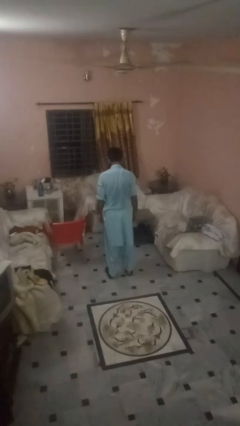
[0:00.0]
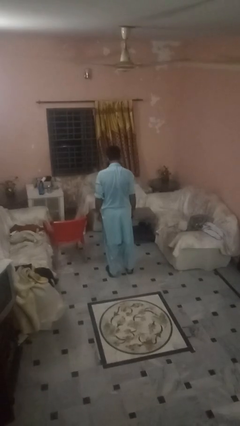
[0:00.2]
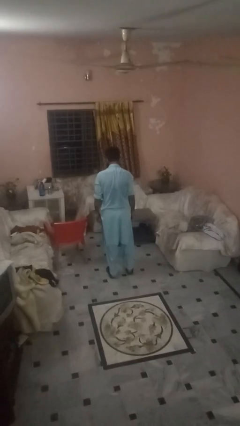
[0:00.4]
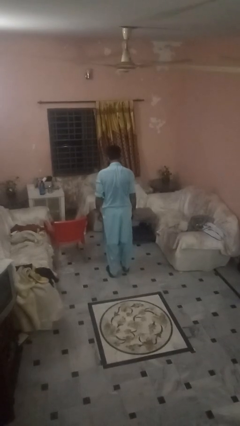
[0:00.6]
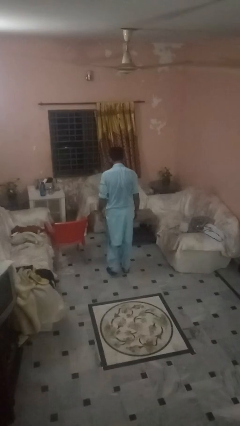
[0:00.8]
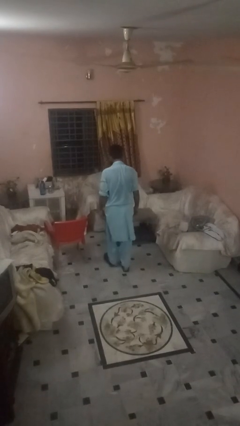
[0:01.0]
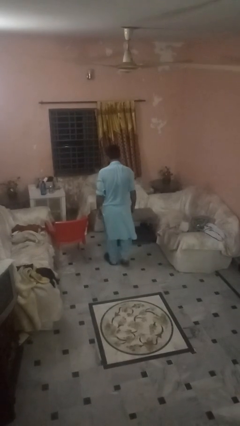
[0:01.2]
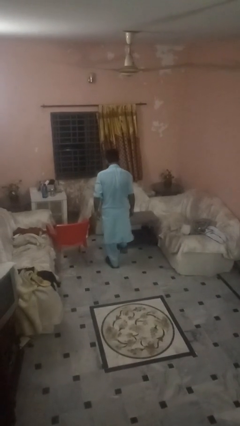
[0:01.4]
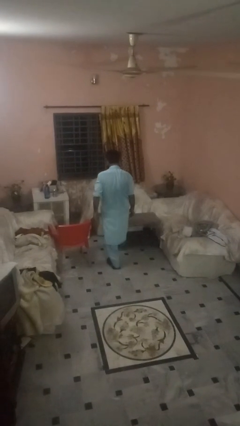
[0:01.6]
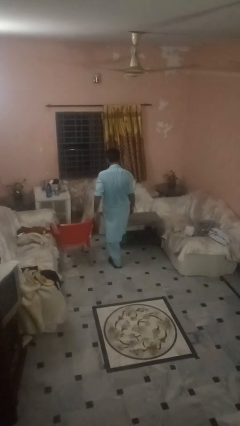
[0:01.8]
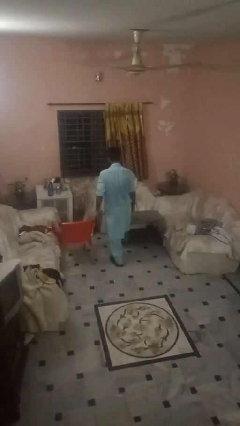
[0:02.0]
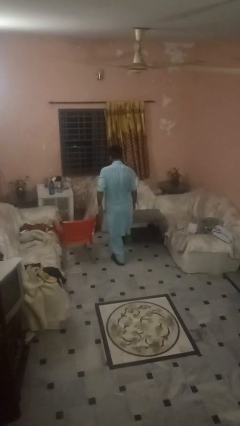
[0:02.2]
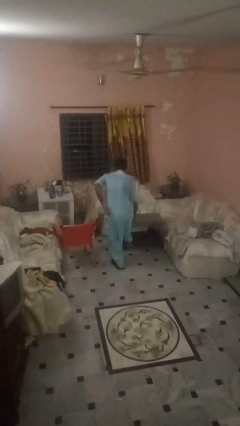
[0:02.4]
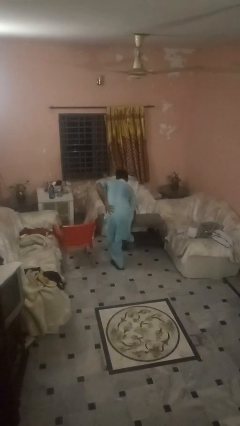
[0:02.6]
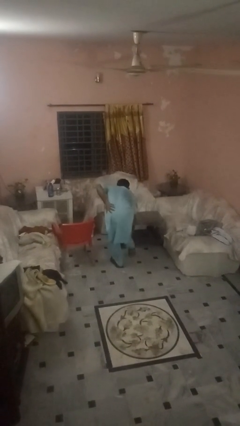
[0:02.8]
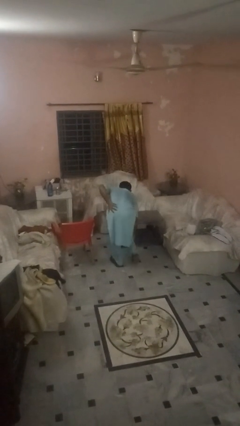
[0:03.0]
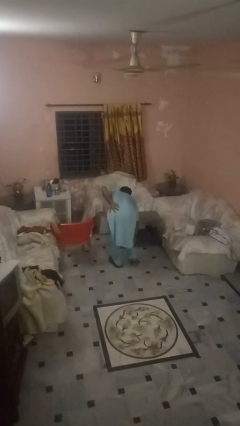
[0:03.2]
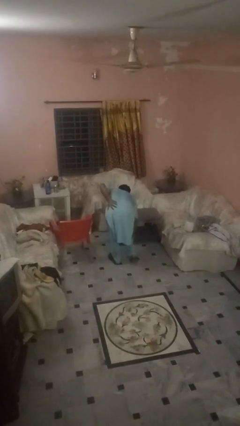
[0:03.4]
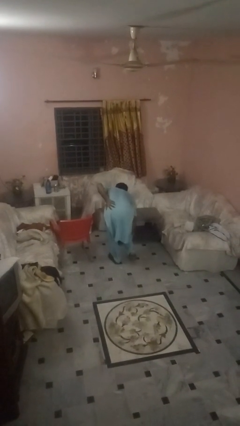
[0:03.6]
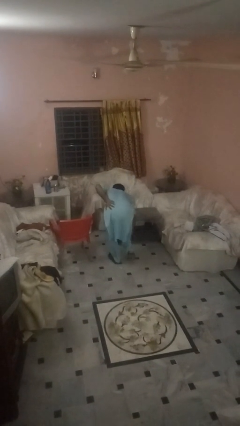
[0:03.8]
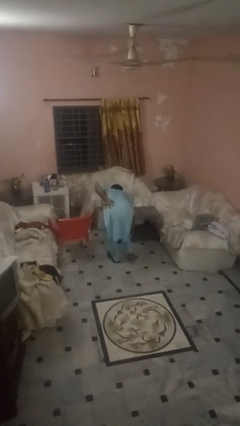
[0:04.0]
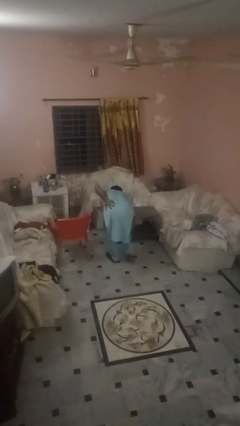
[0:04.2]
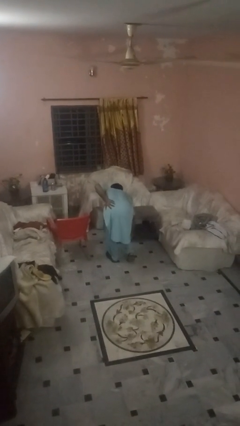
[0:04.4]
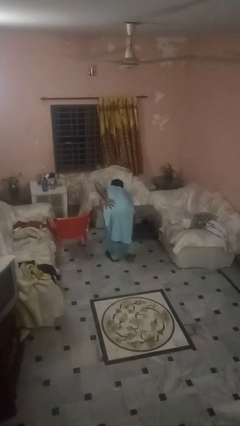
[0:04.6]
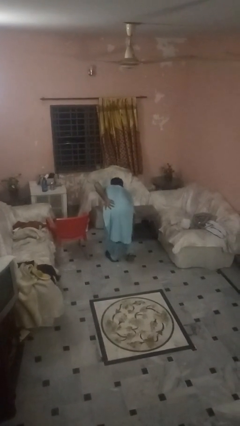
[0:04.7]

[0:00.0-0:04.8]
person bumps into table

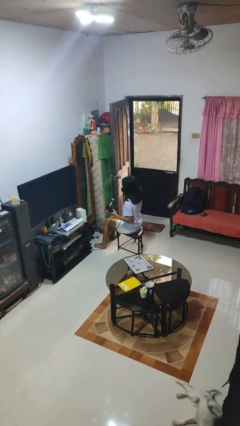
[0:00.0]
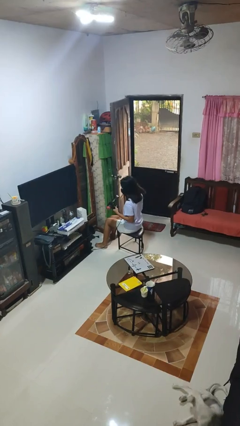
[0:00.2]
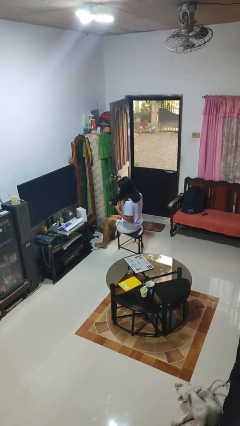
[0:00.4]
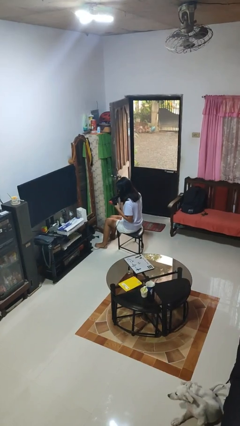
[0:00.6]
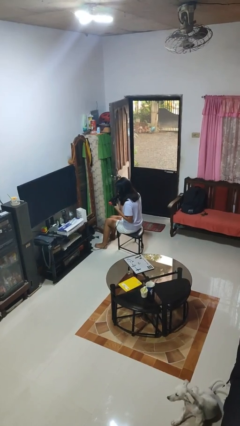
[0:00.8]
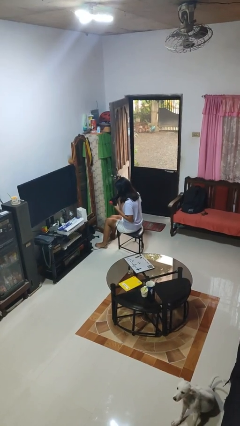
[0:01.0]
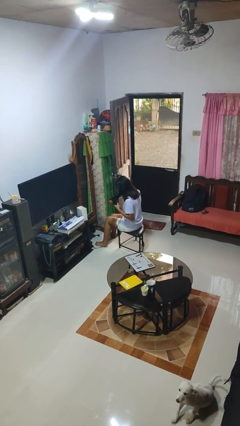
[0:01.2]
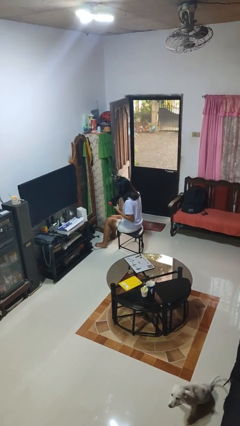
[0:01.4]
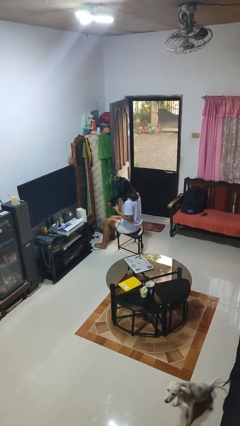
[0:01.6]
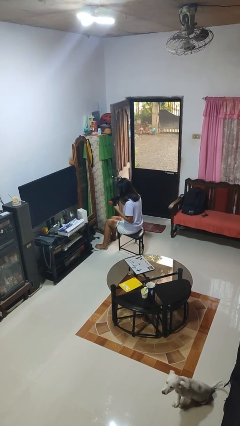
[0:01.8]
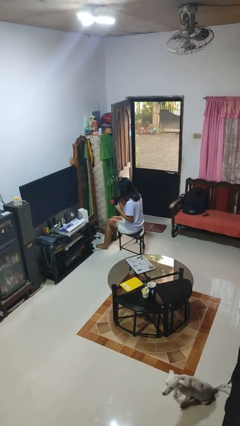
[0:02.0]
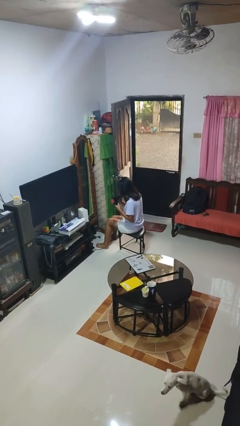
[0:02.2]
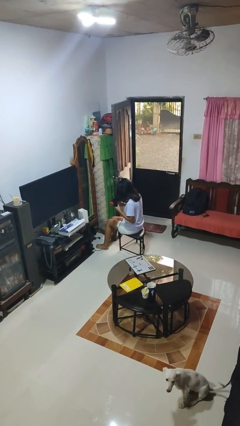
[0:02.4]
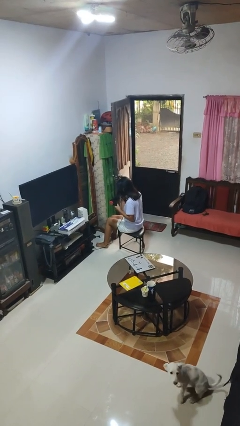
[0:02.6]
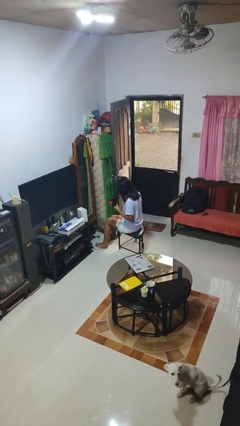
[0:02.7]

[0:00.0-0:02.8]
person dries hair with hairdryer

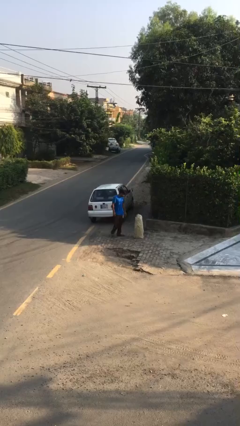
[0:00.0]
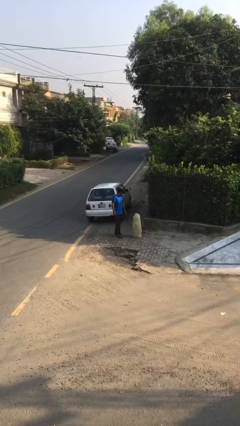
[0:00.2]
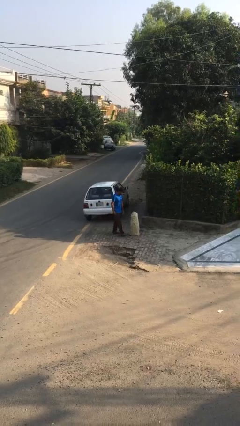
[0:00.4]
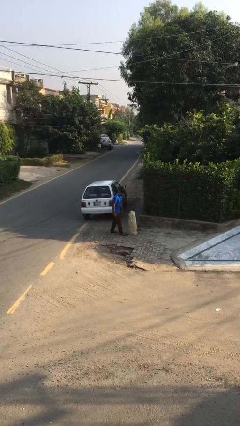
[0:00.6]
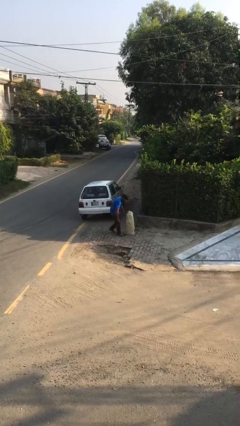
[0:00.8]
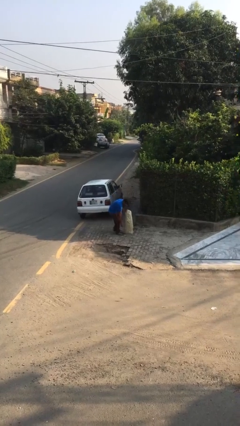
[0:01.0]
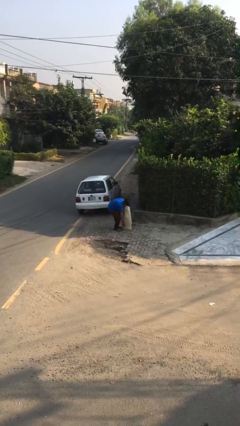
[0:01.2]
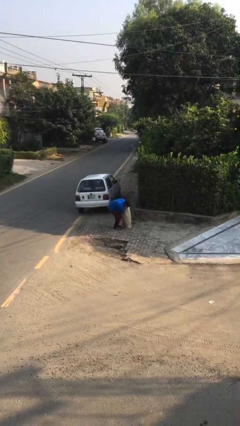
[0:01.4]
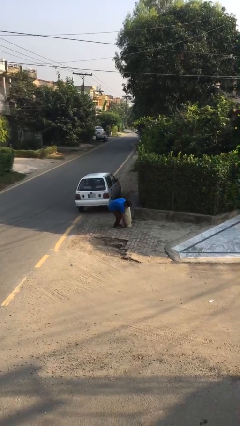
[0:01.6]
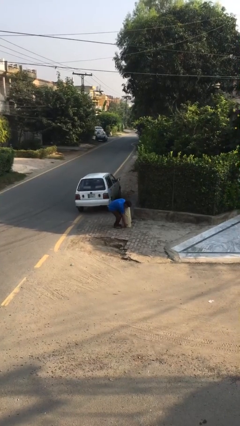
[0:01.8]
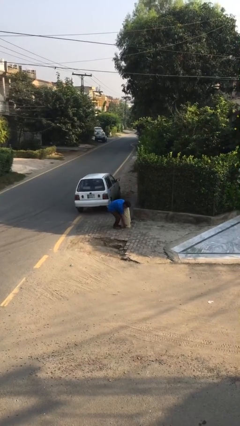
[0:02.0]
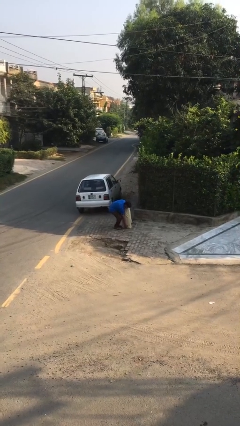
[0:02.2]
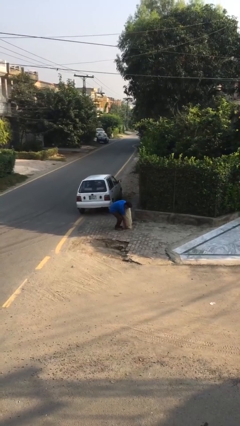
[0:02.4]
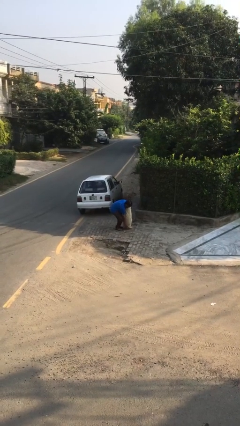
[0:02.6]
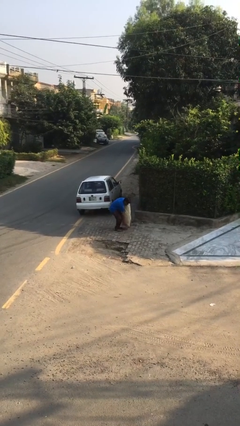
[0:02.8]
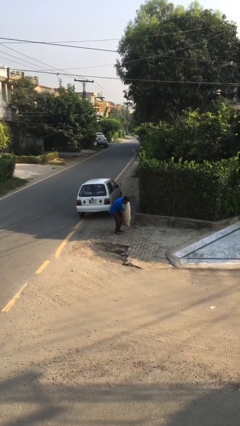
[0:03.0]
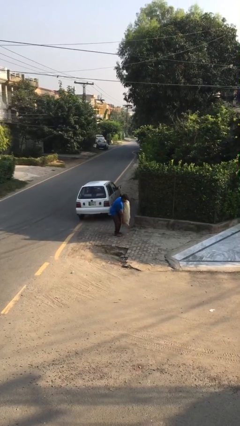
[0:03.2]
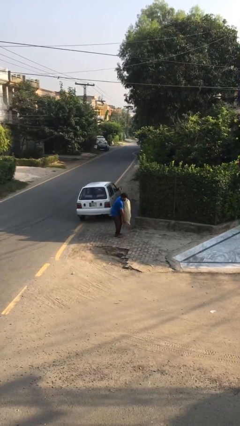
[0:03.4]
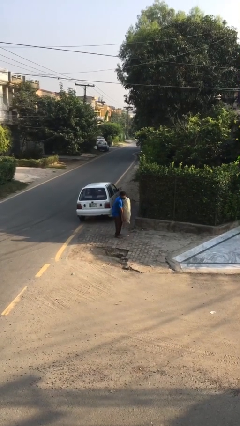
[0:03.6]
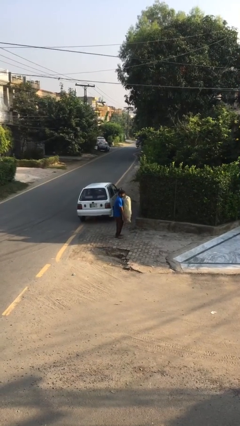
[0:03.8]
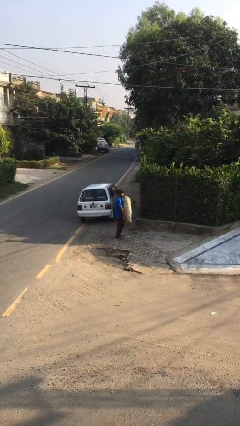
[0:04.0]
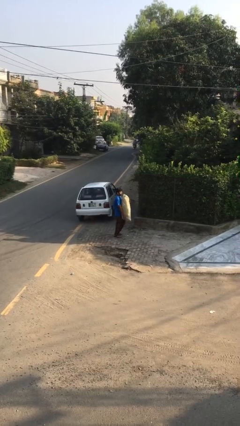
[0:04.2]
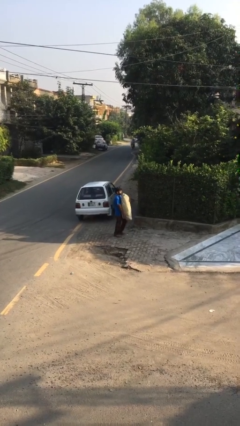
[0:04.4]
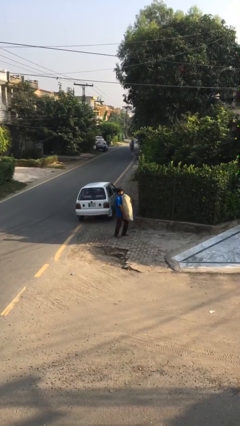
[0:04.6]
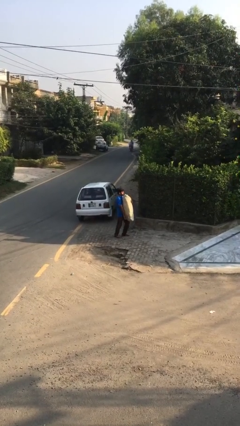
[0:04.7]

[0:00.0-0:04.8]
person picks up object from floor

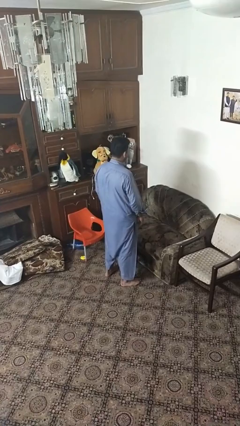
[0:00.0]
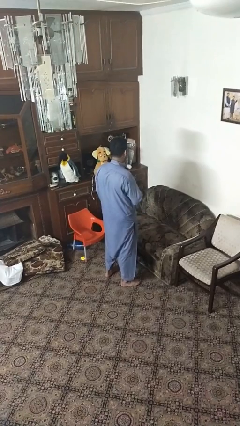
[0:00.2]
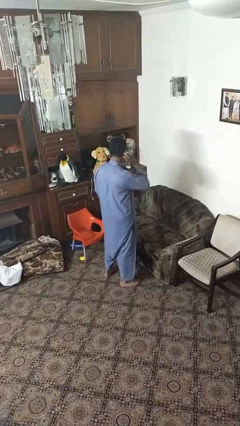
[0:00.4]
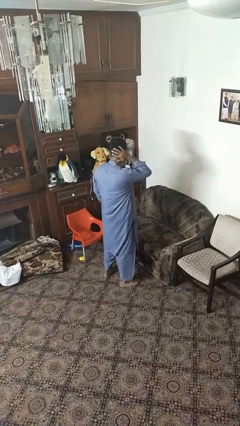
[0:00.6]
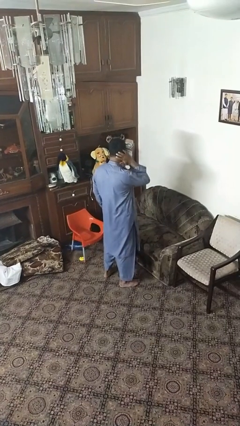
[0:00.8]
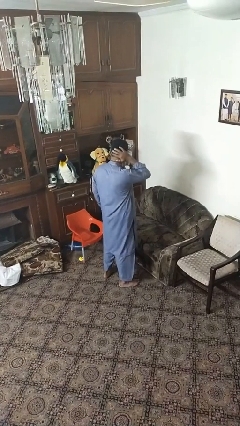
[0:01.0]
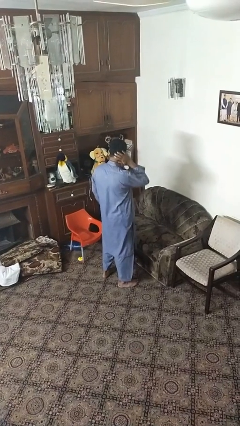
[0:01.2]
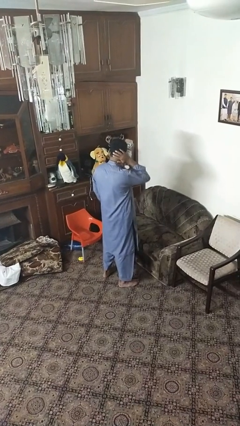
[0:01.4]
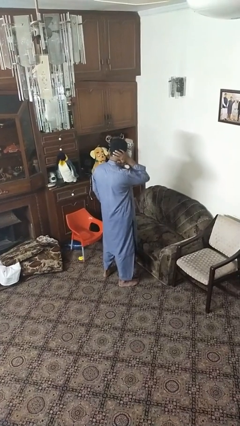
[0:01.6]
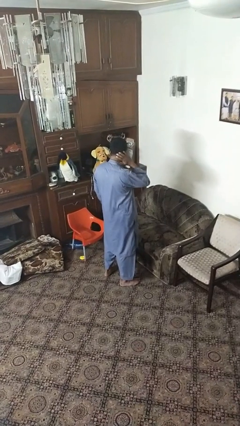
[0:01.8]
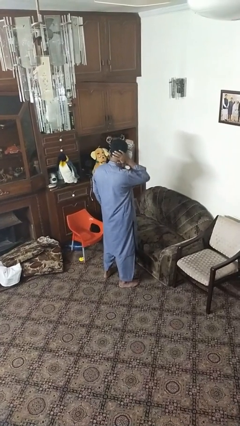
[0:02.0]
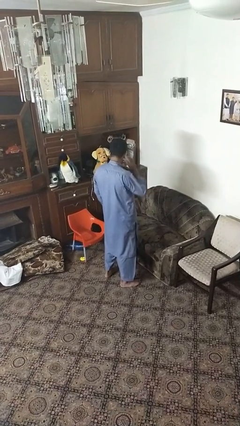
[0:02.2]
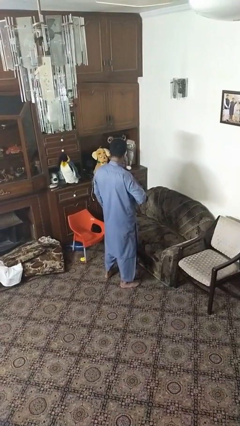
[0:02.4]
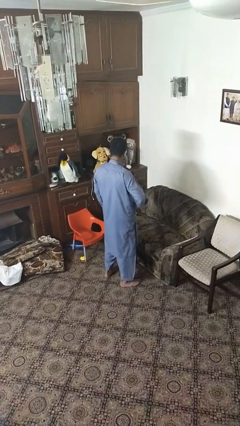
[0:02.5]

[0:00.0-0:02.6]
person strokes hair

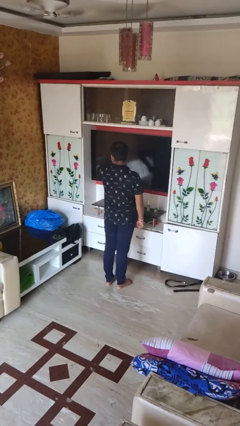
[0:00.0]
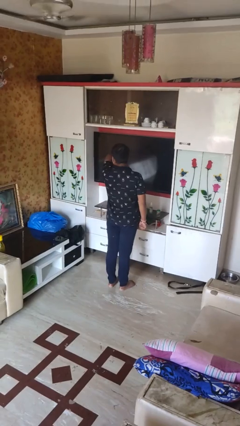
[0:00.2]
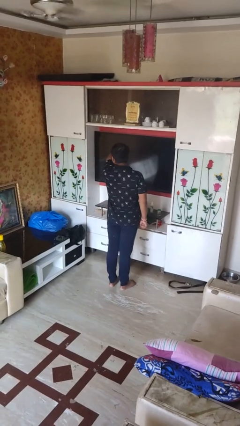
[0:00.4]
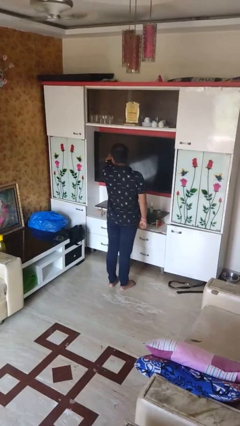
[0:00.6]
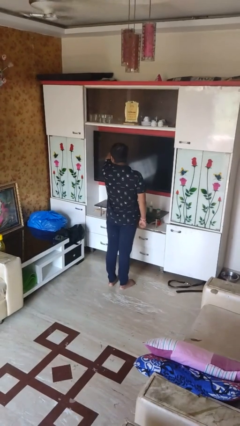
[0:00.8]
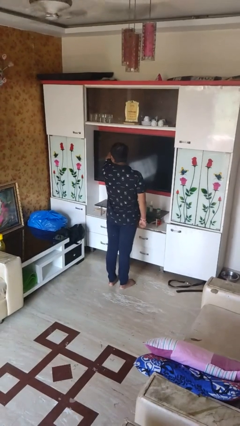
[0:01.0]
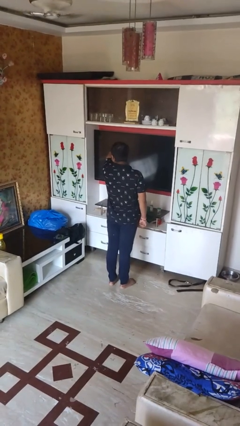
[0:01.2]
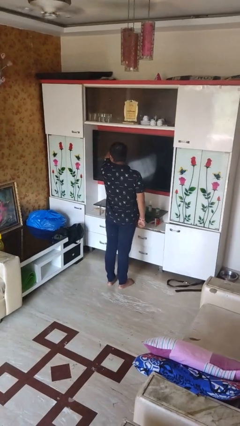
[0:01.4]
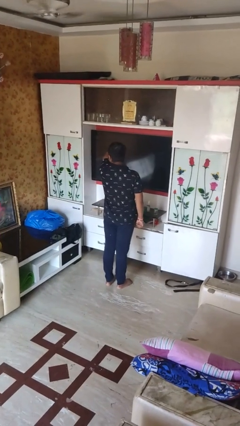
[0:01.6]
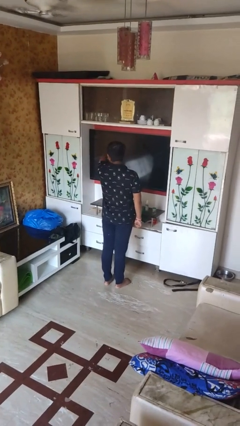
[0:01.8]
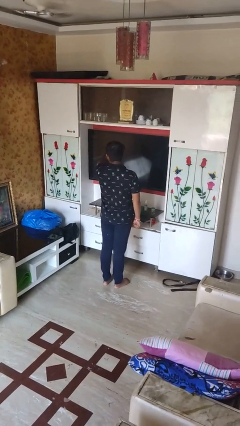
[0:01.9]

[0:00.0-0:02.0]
person sneezes into arm

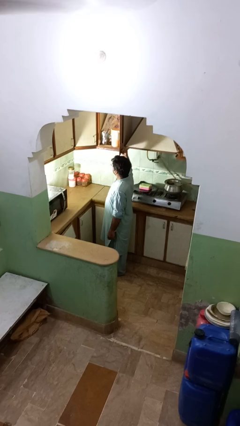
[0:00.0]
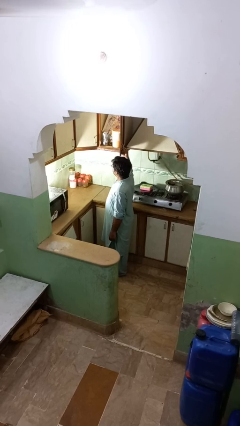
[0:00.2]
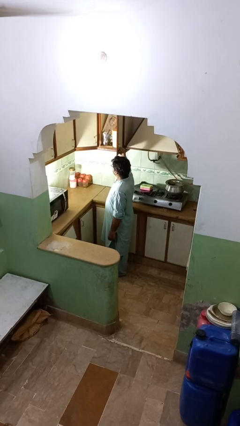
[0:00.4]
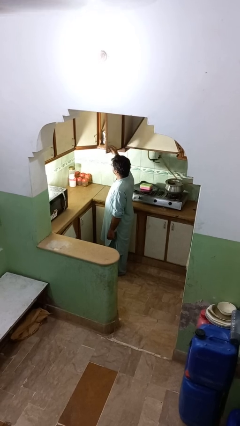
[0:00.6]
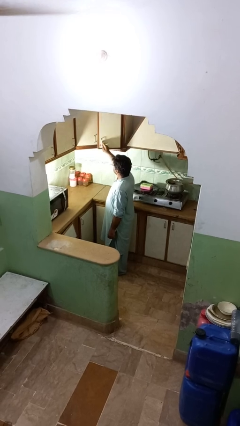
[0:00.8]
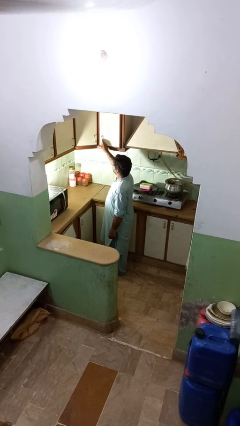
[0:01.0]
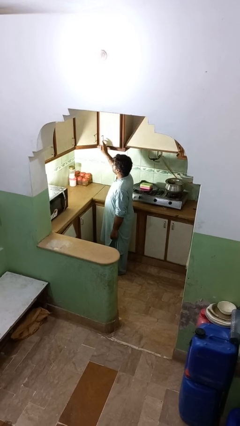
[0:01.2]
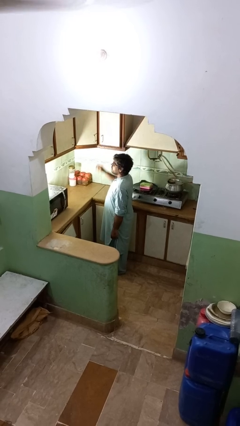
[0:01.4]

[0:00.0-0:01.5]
person closes kitchen drawer
